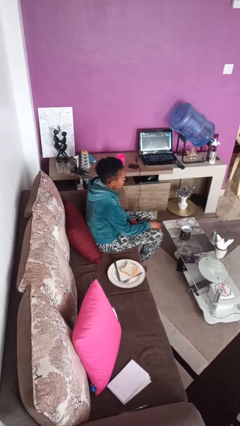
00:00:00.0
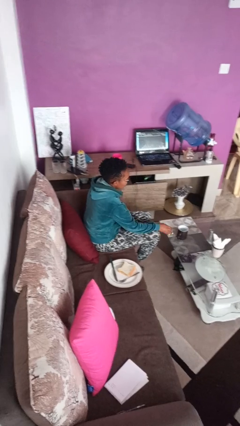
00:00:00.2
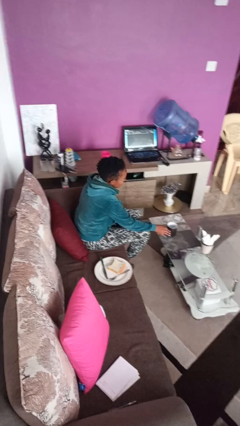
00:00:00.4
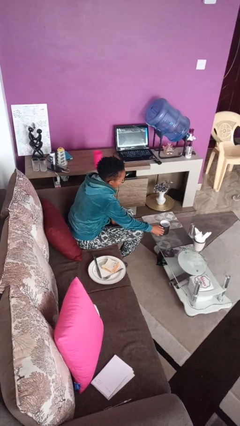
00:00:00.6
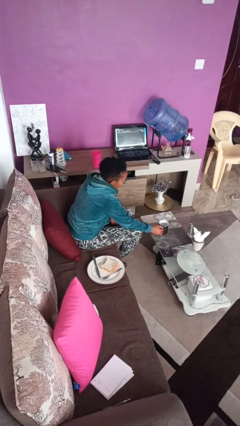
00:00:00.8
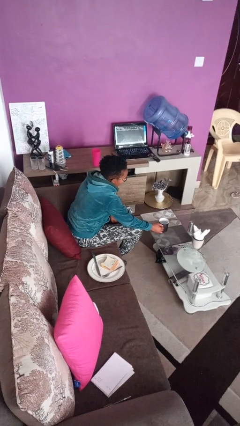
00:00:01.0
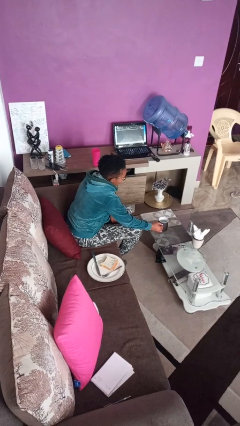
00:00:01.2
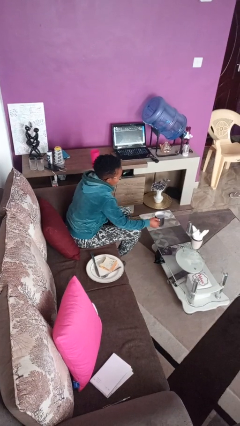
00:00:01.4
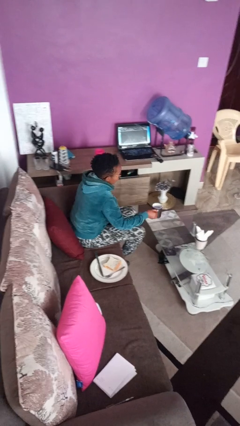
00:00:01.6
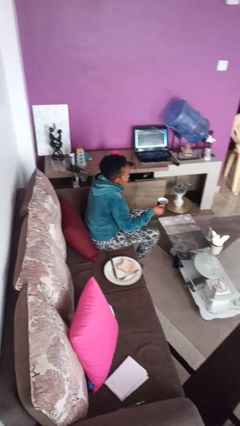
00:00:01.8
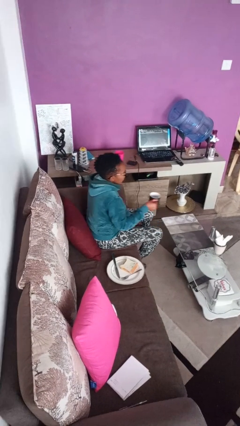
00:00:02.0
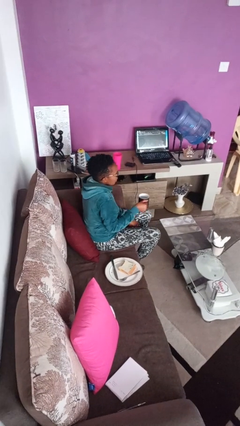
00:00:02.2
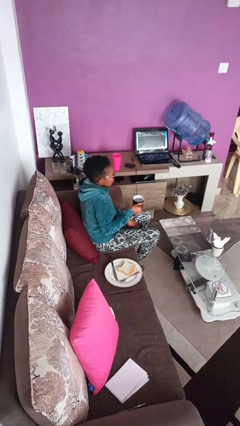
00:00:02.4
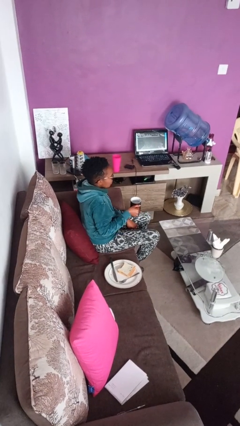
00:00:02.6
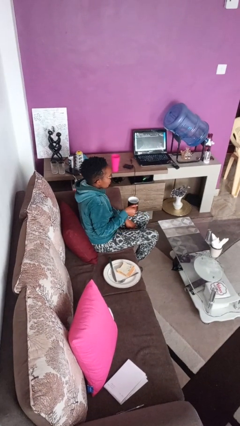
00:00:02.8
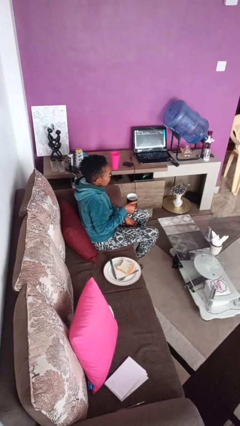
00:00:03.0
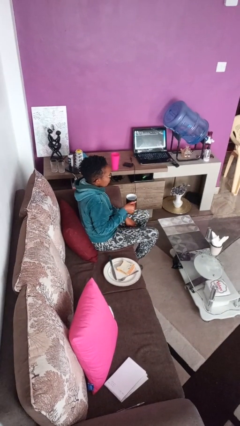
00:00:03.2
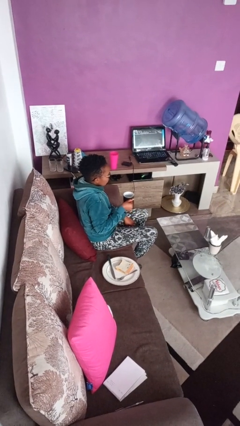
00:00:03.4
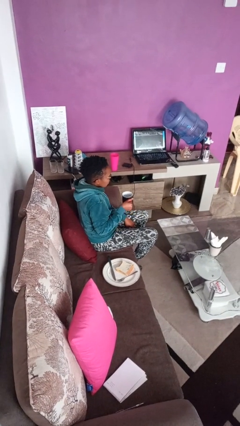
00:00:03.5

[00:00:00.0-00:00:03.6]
person picks up object from table

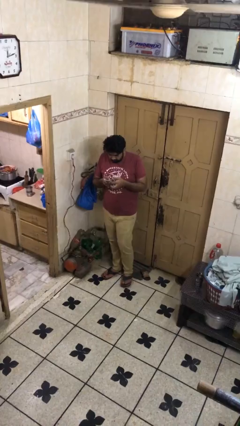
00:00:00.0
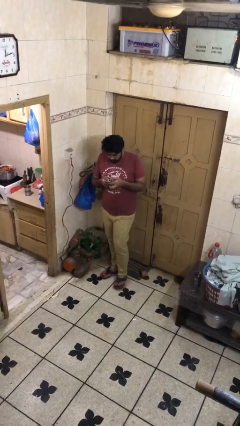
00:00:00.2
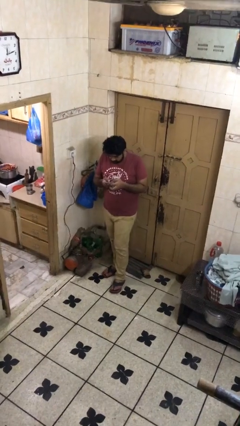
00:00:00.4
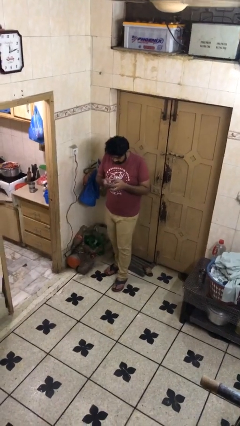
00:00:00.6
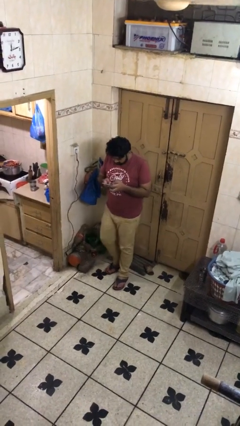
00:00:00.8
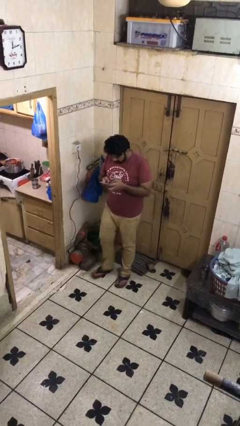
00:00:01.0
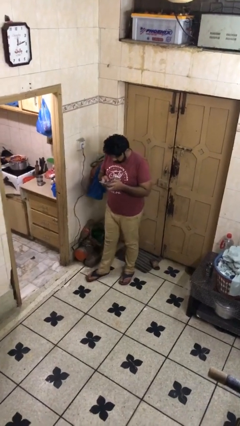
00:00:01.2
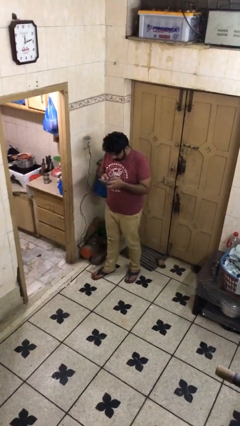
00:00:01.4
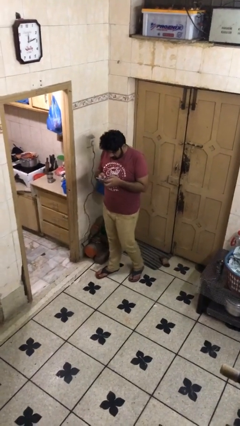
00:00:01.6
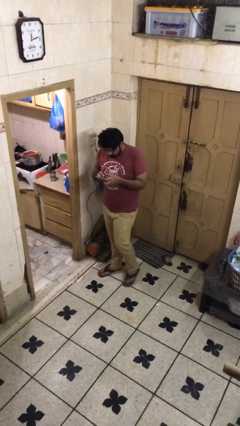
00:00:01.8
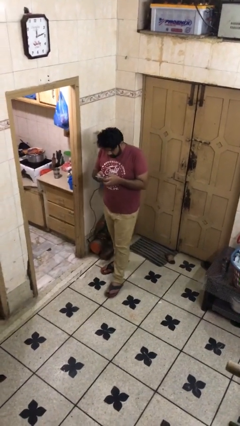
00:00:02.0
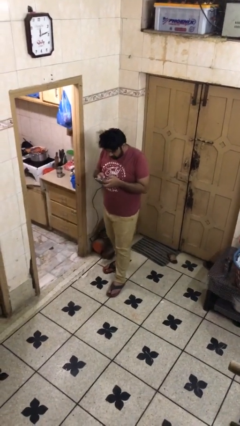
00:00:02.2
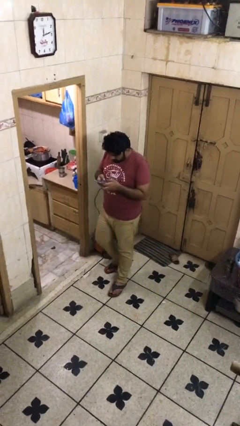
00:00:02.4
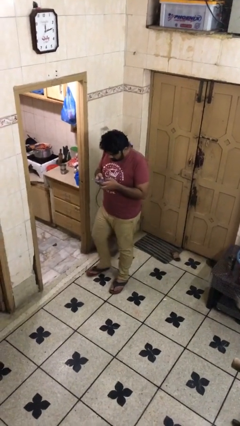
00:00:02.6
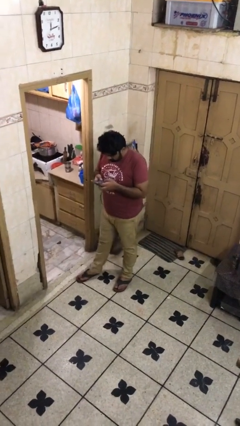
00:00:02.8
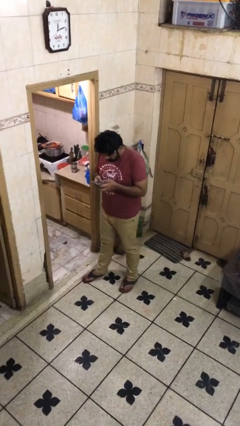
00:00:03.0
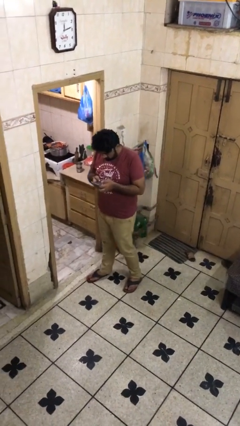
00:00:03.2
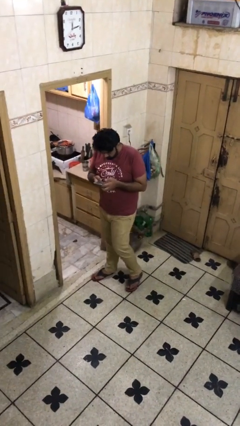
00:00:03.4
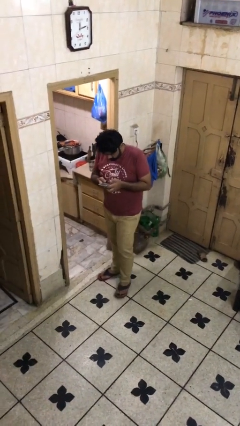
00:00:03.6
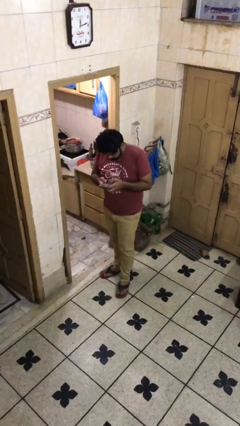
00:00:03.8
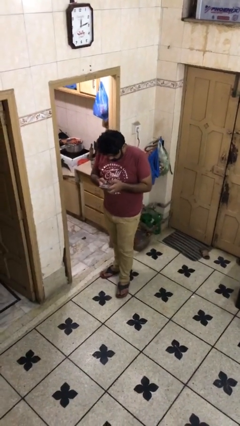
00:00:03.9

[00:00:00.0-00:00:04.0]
person texts on phone

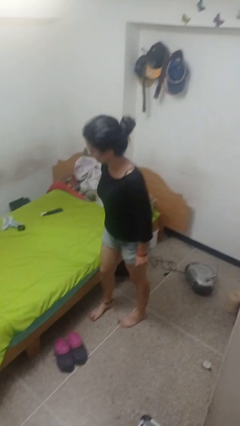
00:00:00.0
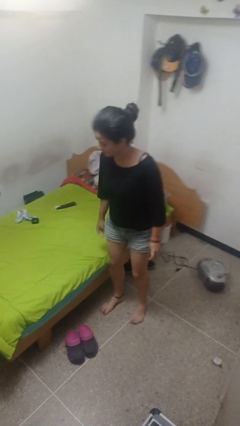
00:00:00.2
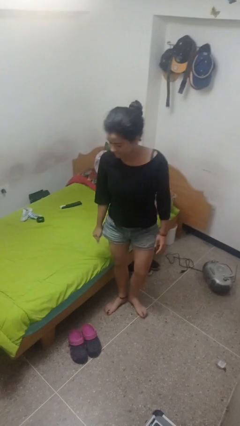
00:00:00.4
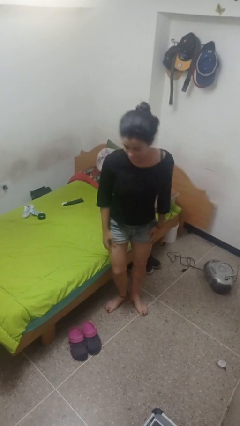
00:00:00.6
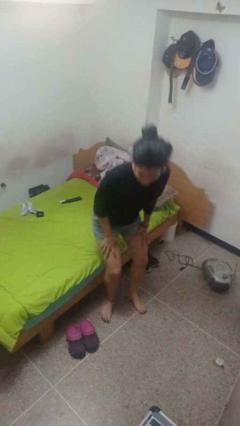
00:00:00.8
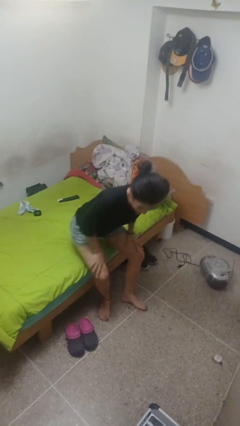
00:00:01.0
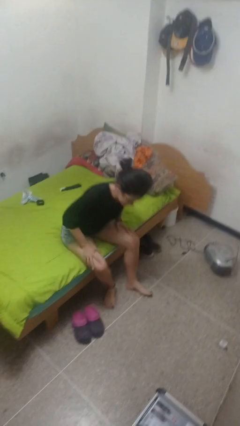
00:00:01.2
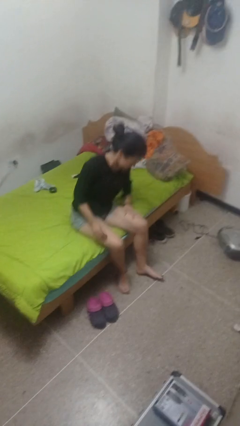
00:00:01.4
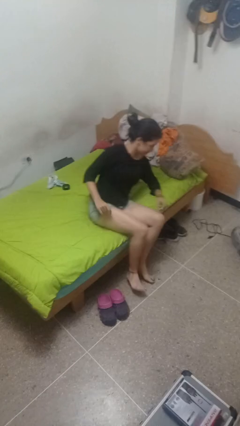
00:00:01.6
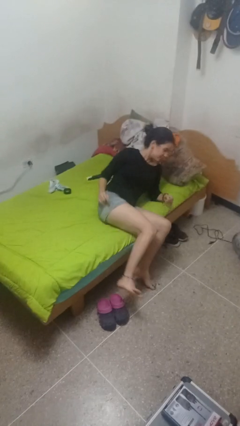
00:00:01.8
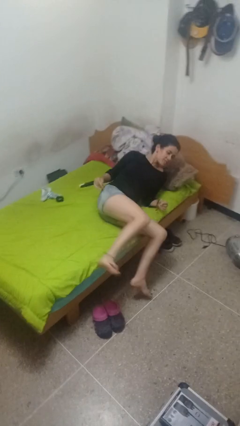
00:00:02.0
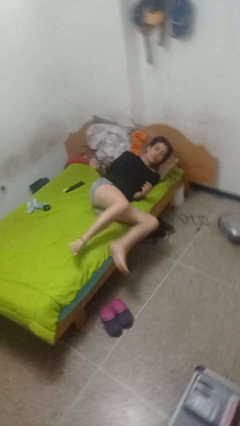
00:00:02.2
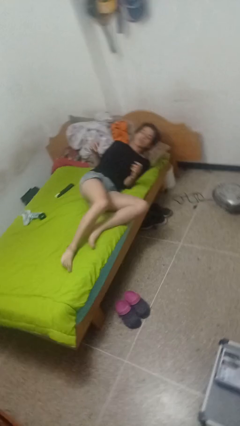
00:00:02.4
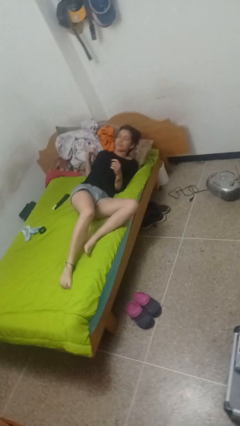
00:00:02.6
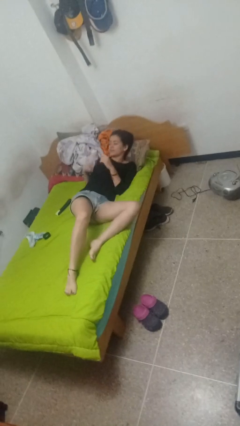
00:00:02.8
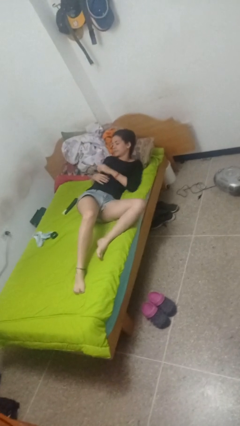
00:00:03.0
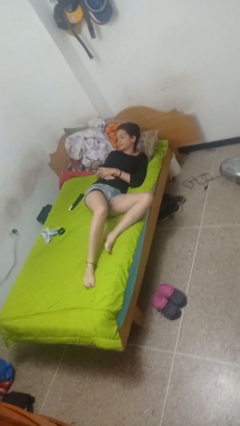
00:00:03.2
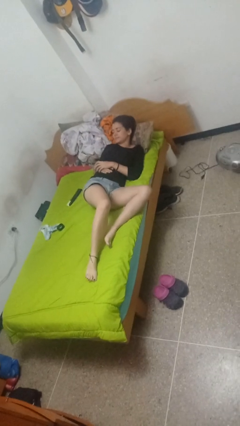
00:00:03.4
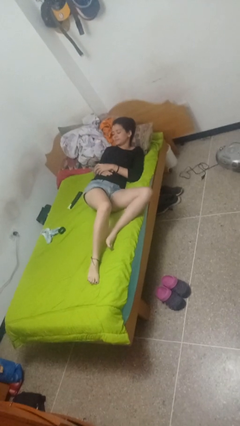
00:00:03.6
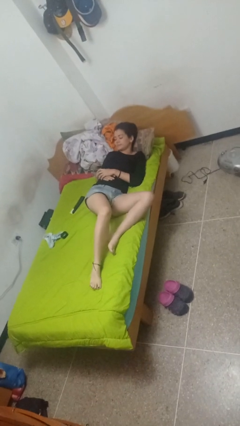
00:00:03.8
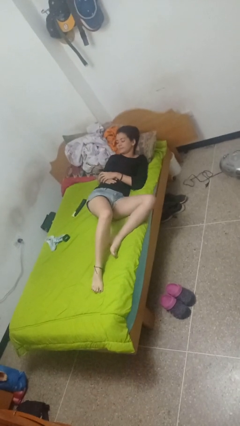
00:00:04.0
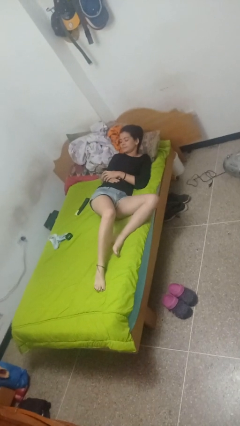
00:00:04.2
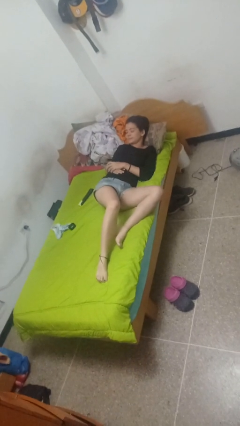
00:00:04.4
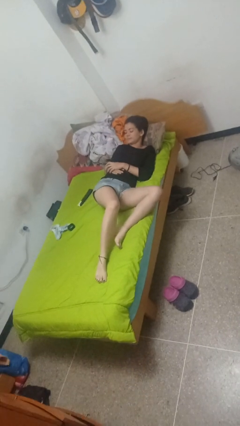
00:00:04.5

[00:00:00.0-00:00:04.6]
person lies down on bed

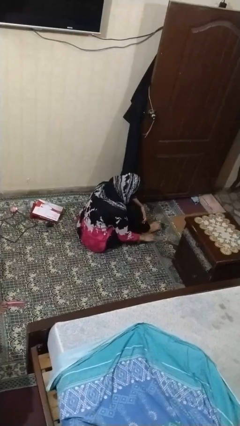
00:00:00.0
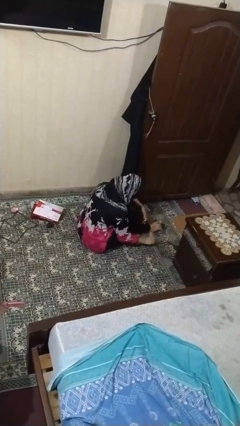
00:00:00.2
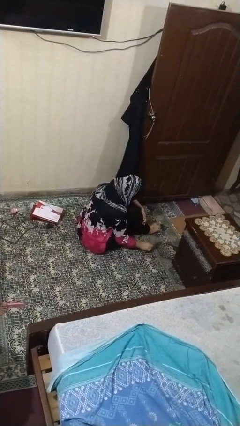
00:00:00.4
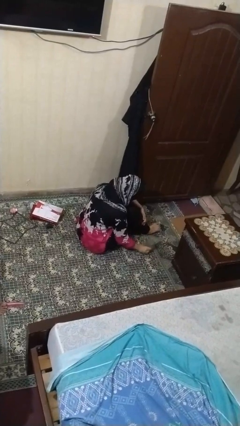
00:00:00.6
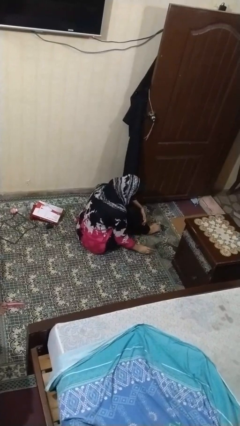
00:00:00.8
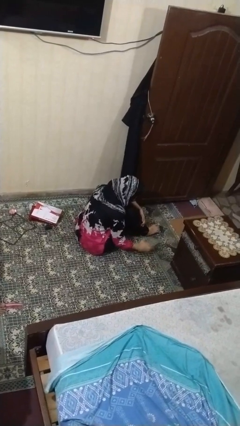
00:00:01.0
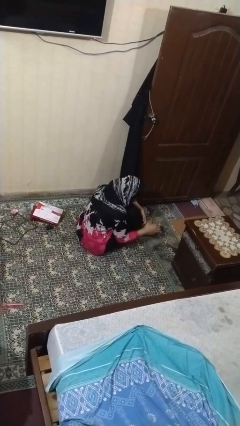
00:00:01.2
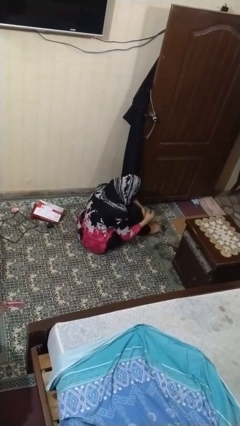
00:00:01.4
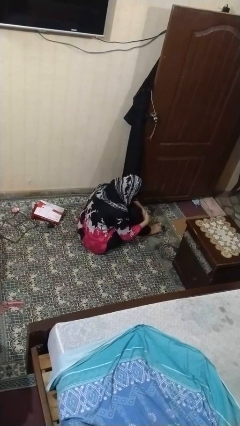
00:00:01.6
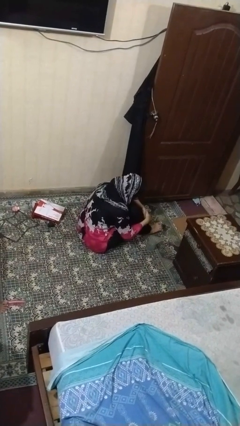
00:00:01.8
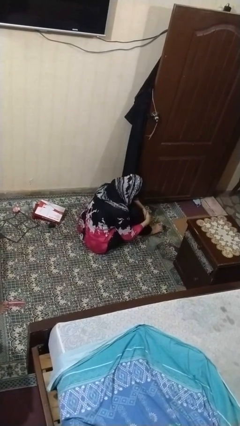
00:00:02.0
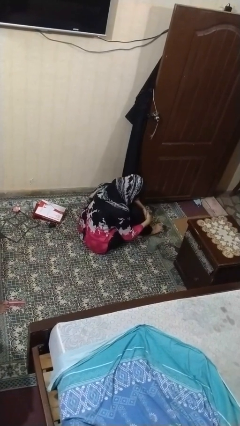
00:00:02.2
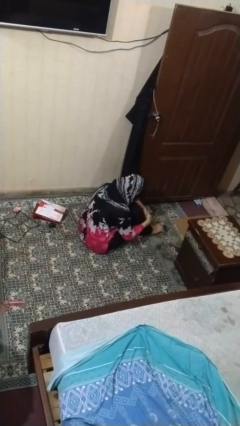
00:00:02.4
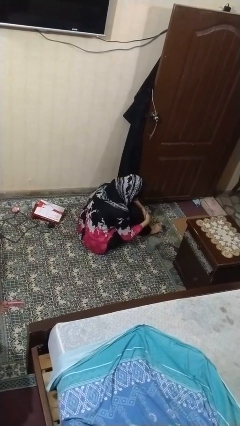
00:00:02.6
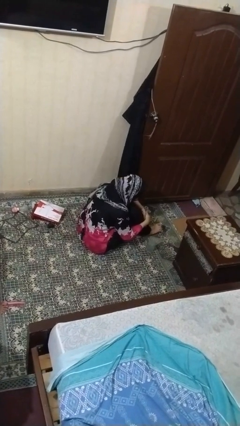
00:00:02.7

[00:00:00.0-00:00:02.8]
person sets upright glass

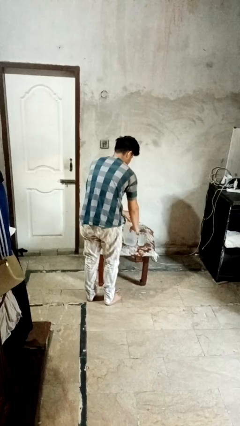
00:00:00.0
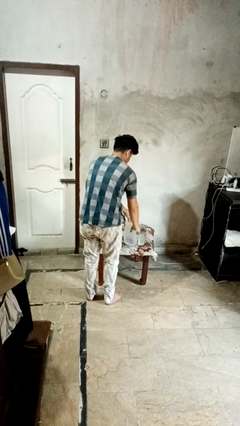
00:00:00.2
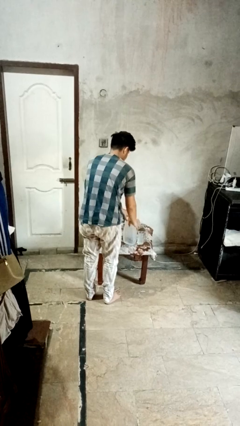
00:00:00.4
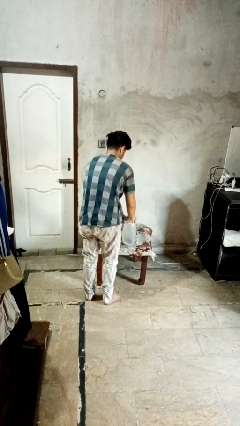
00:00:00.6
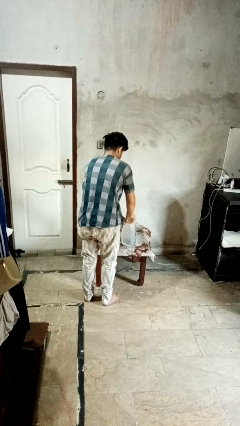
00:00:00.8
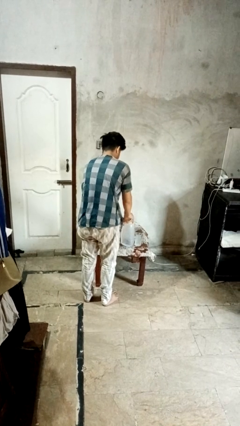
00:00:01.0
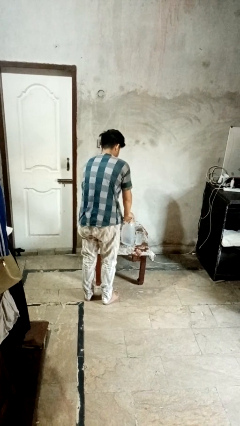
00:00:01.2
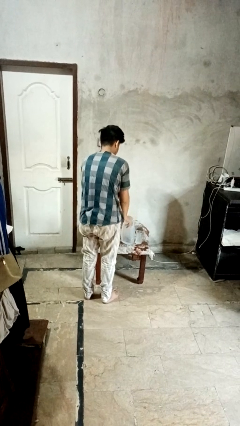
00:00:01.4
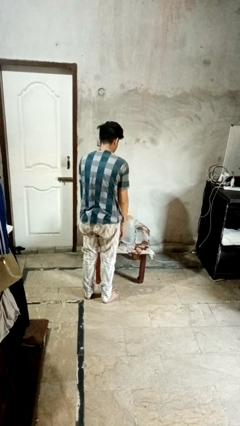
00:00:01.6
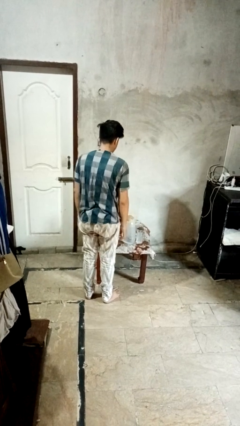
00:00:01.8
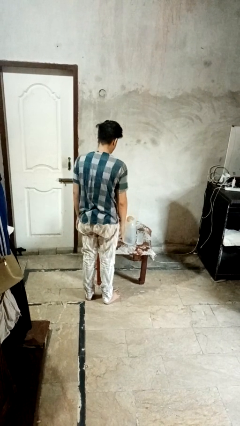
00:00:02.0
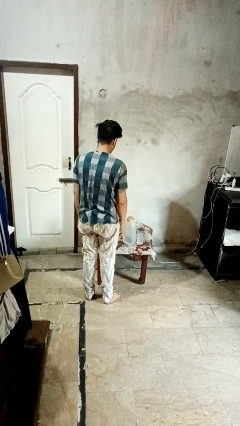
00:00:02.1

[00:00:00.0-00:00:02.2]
person screws lid to bottle
